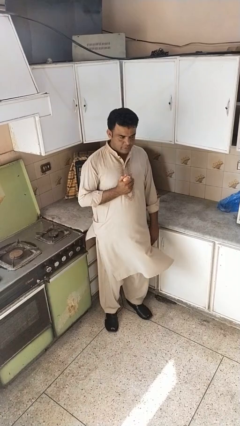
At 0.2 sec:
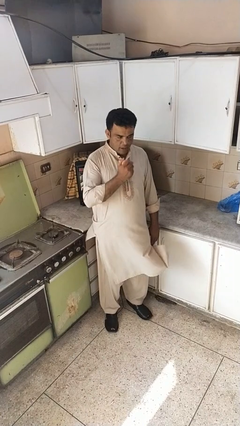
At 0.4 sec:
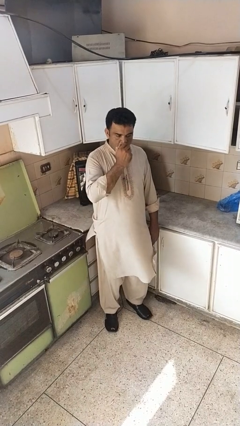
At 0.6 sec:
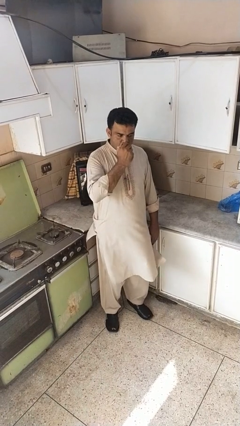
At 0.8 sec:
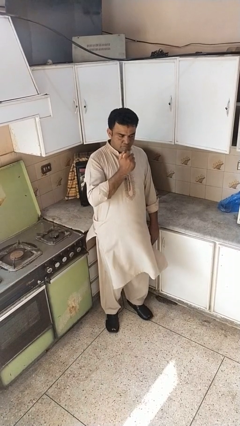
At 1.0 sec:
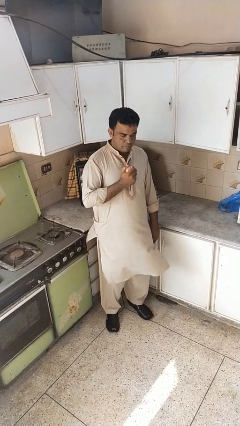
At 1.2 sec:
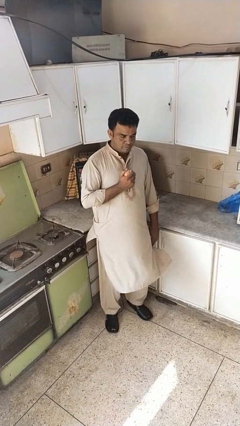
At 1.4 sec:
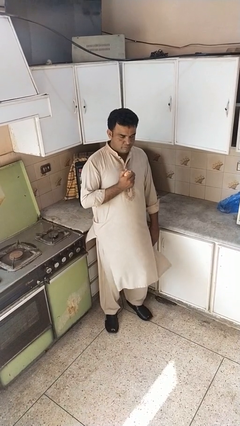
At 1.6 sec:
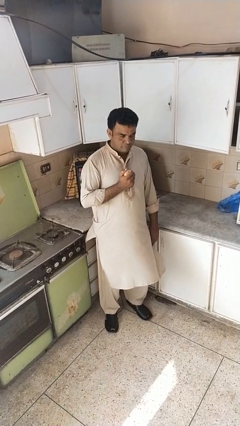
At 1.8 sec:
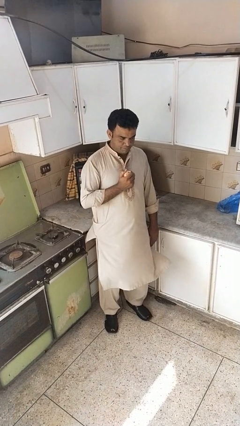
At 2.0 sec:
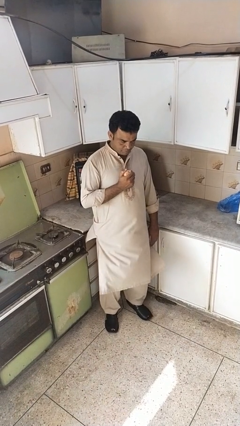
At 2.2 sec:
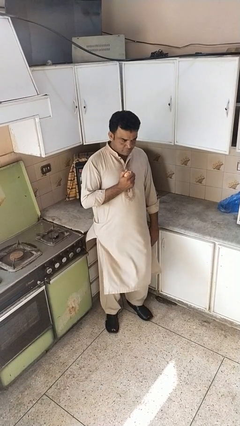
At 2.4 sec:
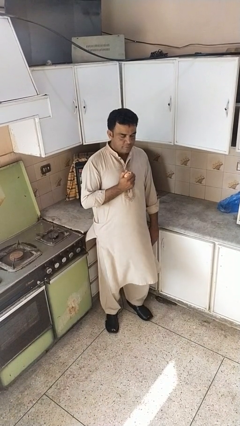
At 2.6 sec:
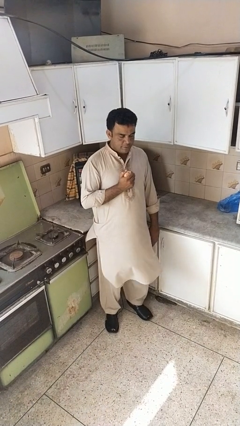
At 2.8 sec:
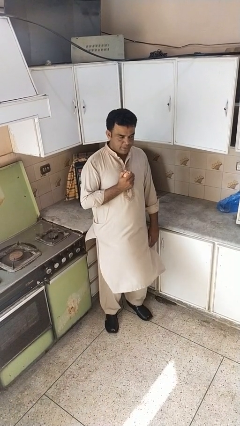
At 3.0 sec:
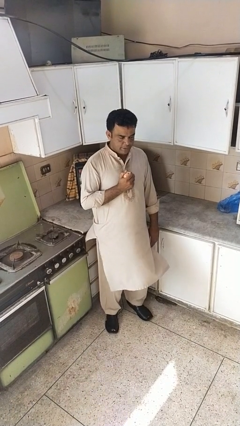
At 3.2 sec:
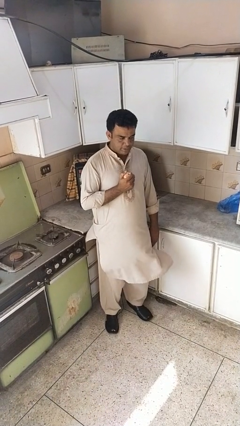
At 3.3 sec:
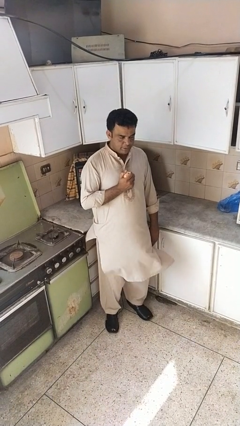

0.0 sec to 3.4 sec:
person eats apple

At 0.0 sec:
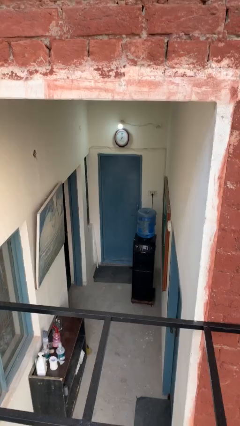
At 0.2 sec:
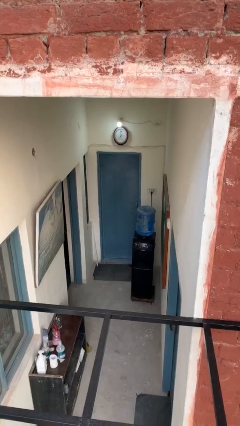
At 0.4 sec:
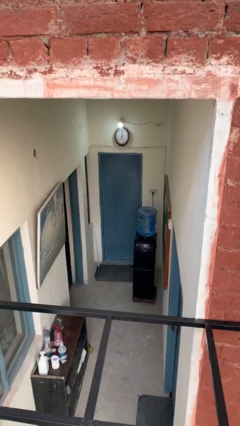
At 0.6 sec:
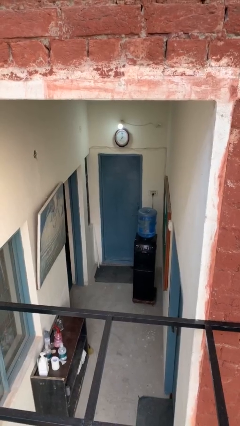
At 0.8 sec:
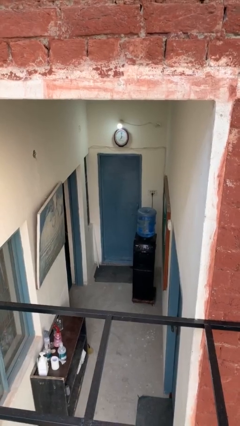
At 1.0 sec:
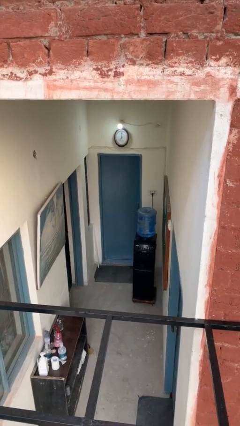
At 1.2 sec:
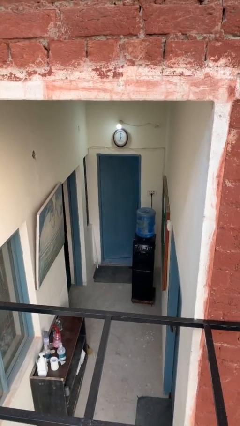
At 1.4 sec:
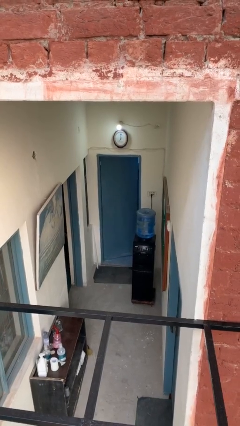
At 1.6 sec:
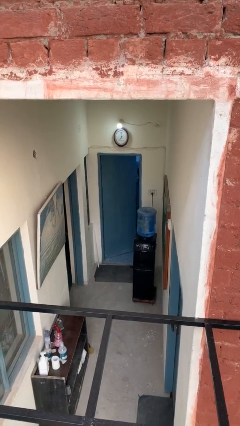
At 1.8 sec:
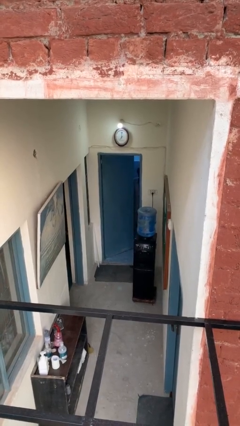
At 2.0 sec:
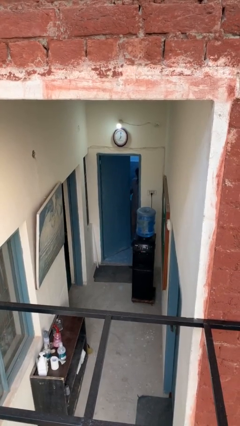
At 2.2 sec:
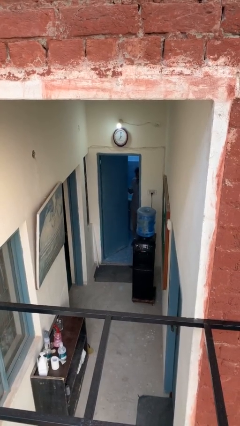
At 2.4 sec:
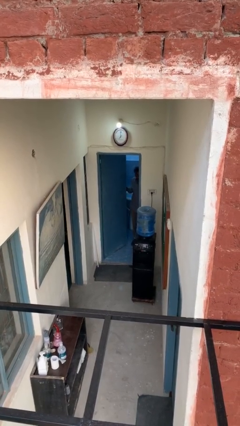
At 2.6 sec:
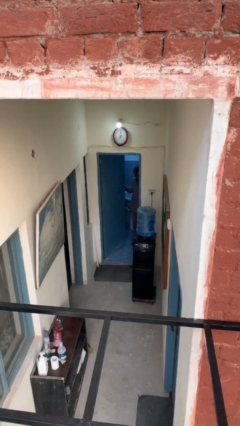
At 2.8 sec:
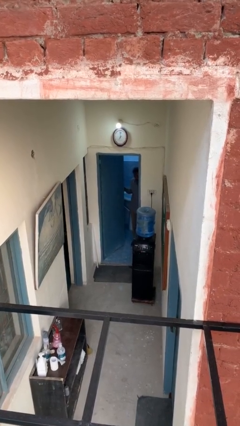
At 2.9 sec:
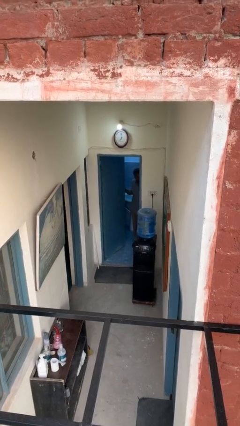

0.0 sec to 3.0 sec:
person opens facility door

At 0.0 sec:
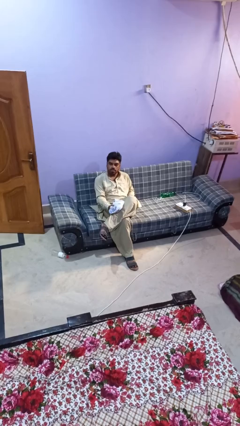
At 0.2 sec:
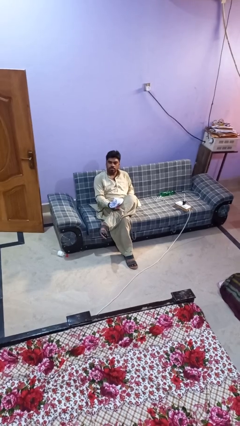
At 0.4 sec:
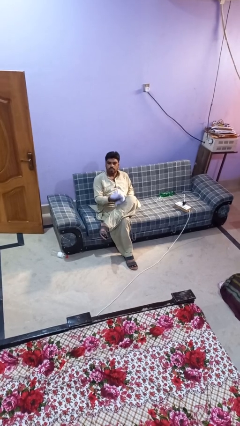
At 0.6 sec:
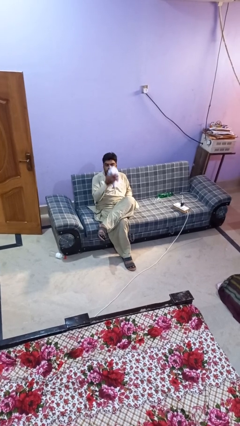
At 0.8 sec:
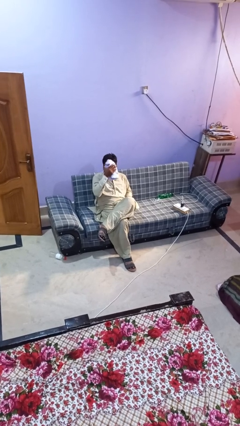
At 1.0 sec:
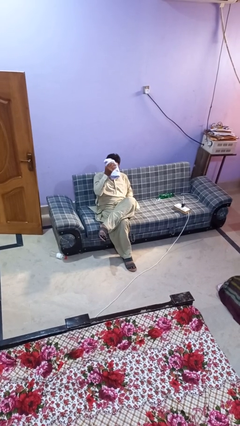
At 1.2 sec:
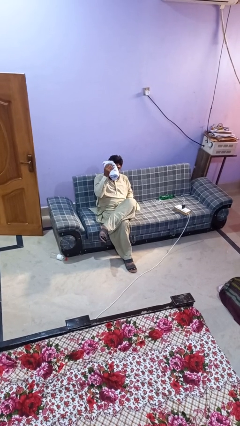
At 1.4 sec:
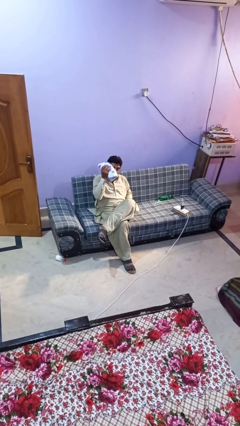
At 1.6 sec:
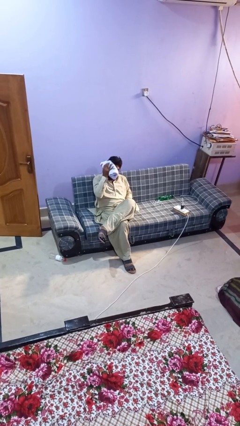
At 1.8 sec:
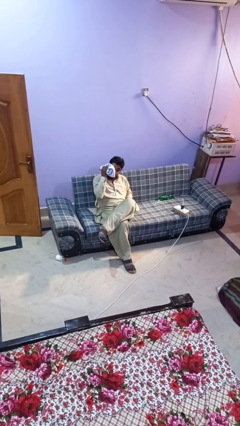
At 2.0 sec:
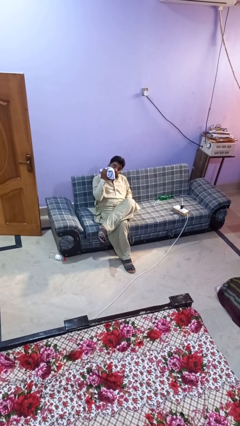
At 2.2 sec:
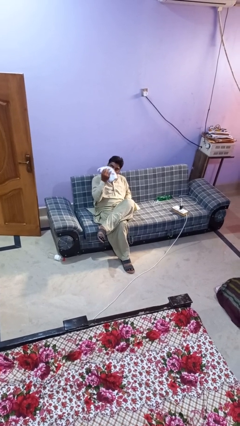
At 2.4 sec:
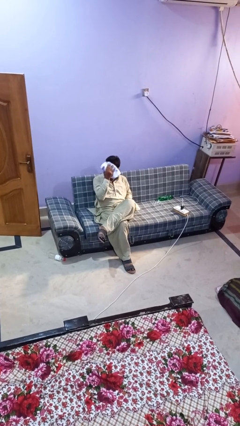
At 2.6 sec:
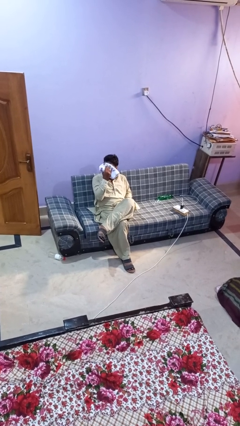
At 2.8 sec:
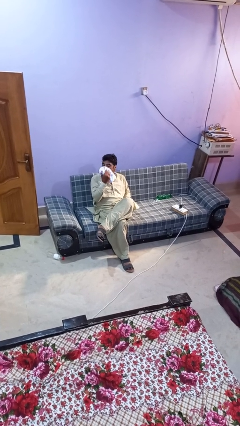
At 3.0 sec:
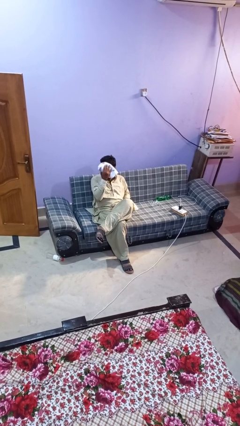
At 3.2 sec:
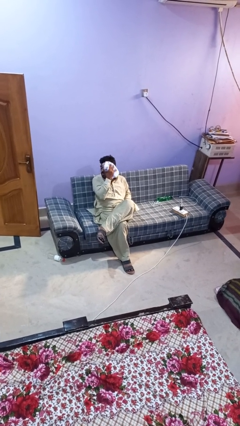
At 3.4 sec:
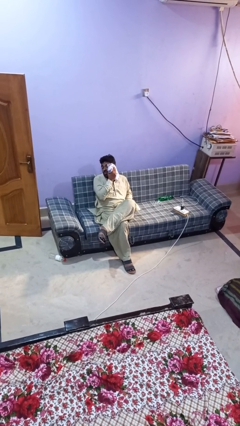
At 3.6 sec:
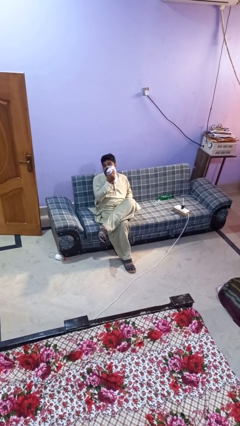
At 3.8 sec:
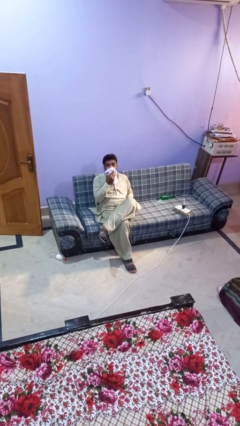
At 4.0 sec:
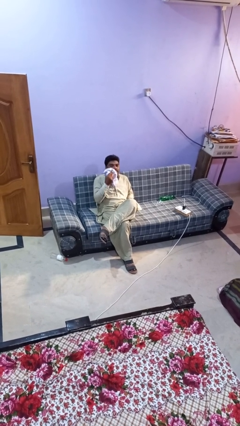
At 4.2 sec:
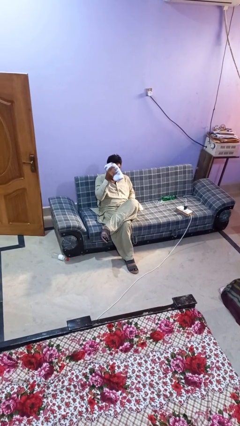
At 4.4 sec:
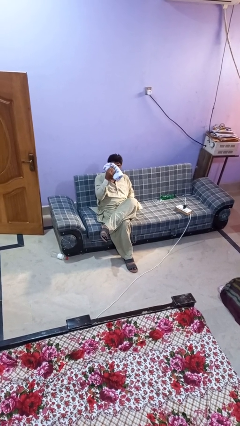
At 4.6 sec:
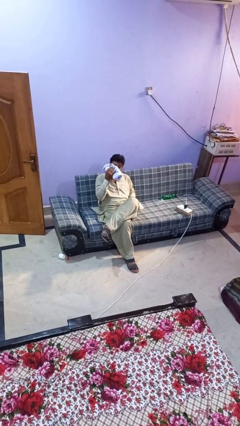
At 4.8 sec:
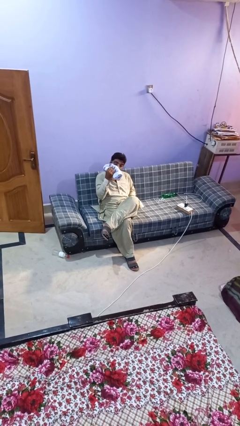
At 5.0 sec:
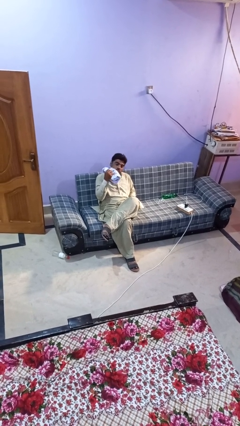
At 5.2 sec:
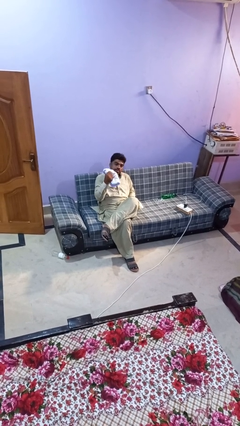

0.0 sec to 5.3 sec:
person wipes mouth with napkin

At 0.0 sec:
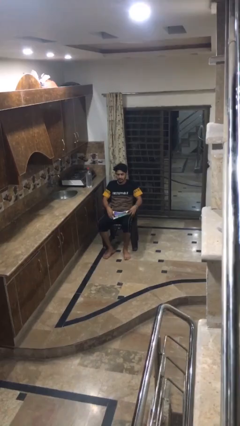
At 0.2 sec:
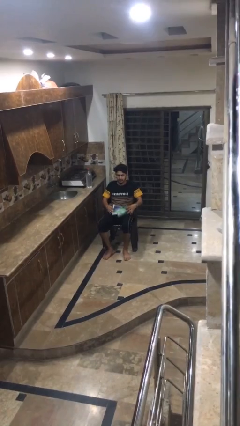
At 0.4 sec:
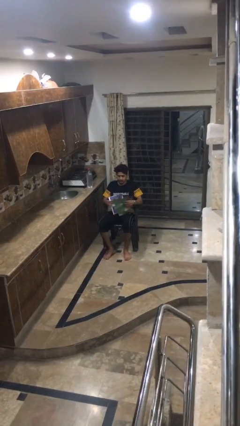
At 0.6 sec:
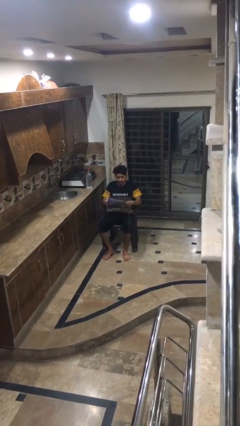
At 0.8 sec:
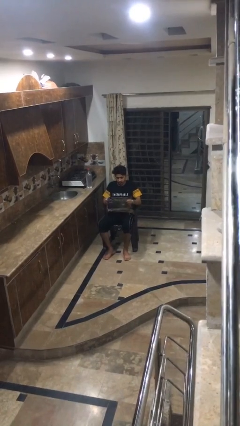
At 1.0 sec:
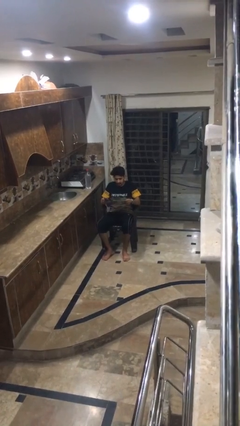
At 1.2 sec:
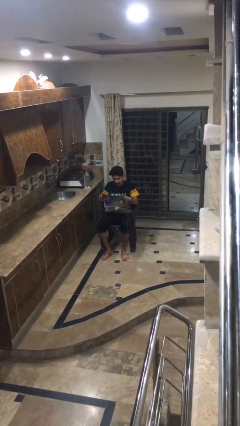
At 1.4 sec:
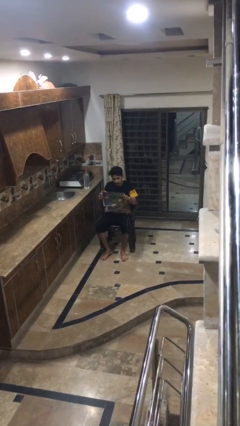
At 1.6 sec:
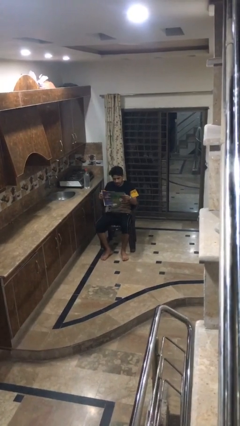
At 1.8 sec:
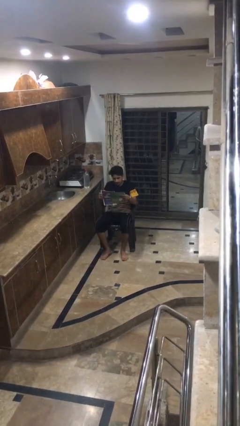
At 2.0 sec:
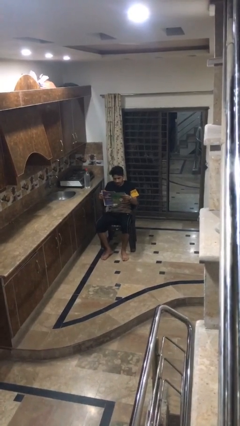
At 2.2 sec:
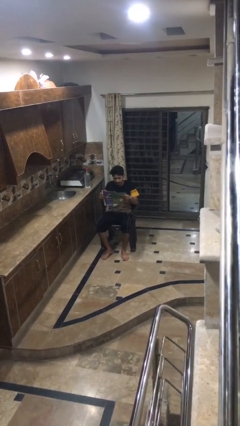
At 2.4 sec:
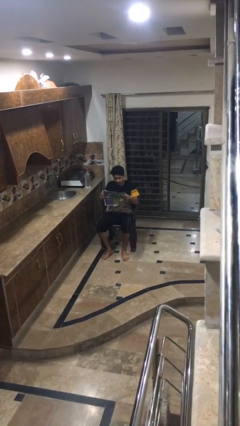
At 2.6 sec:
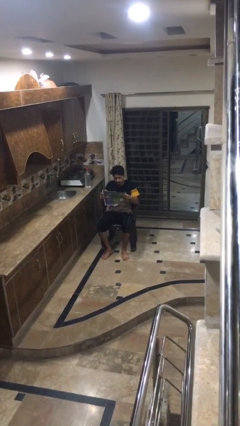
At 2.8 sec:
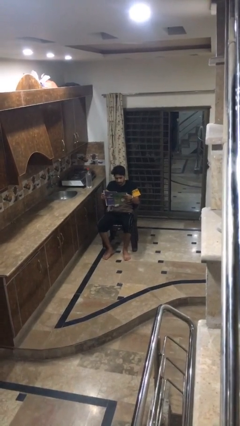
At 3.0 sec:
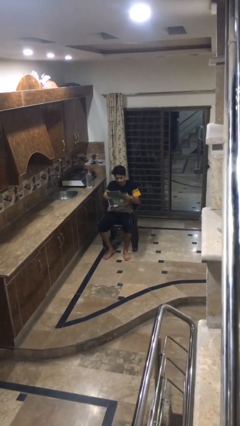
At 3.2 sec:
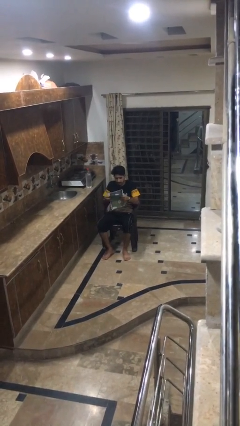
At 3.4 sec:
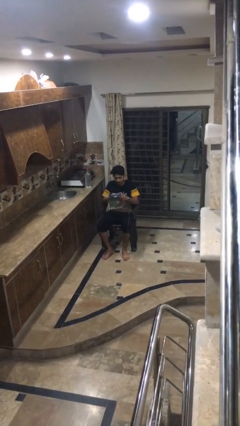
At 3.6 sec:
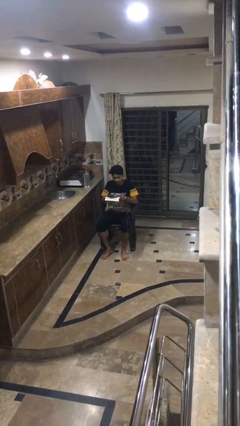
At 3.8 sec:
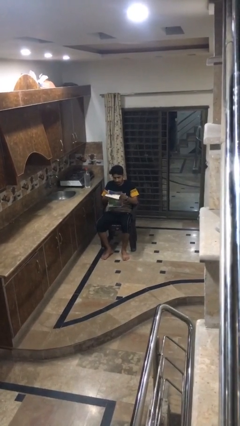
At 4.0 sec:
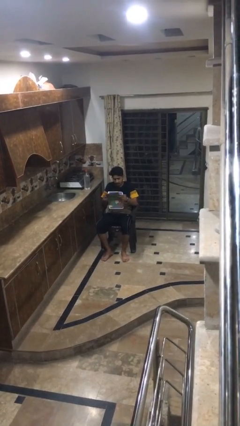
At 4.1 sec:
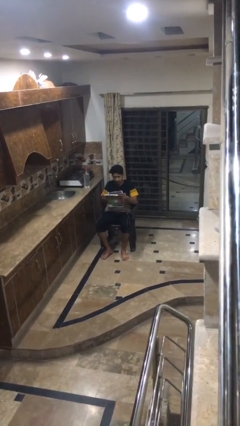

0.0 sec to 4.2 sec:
person reads newspaper

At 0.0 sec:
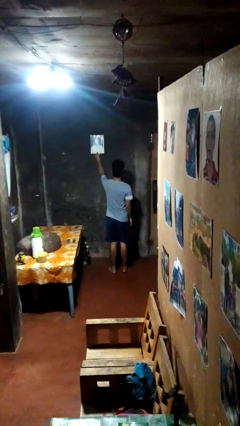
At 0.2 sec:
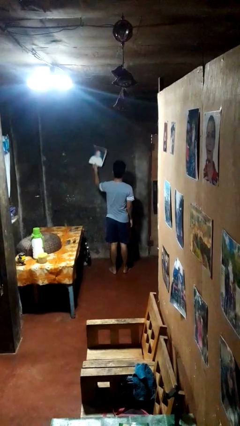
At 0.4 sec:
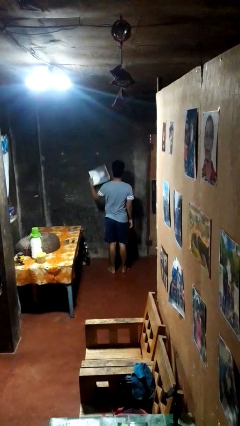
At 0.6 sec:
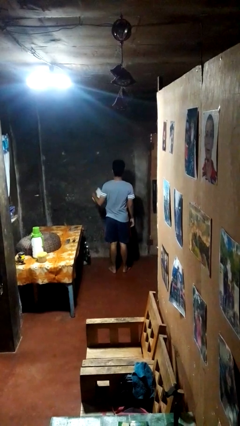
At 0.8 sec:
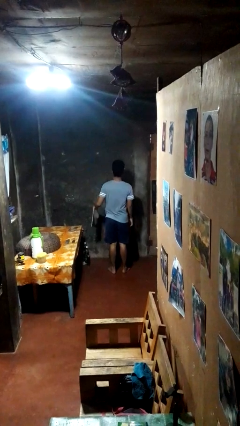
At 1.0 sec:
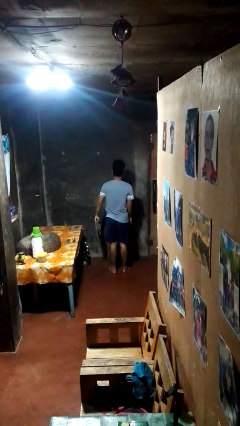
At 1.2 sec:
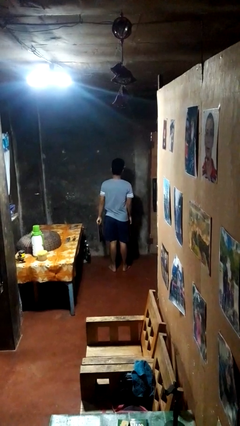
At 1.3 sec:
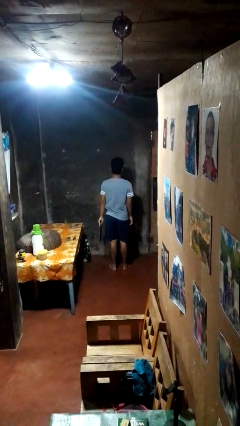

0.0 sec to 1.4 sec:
person takes down picture frame
